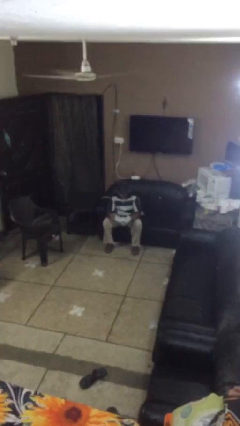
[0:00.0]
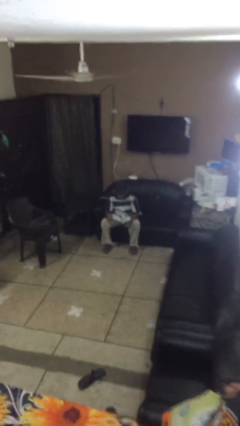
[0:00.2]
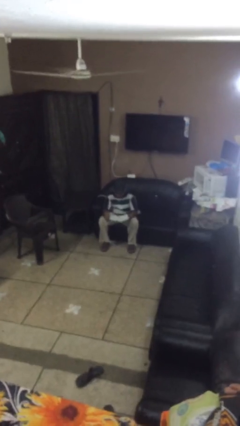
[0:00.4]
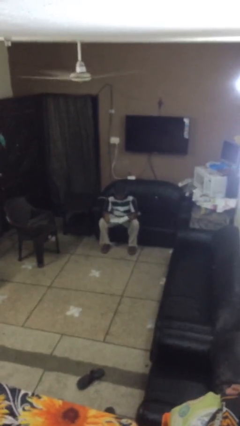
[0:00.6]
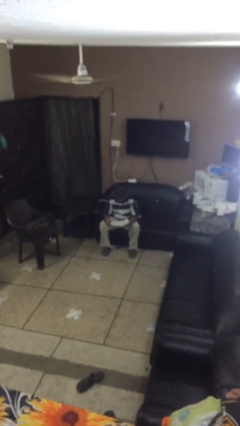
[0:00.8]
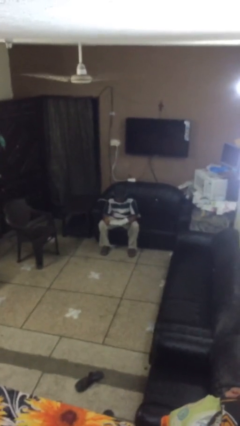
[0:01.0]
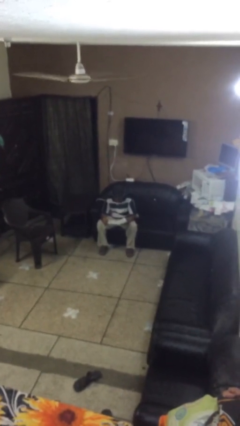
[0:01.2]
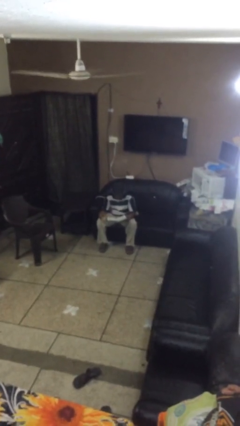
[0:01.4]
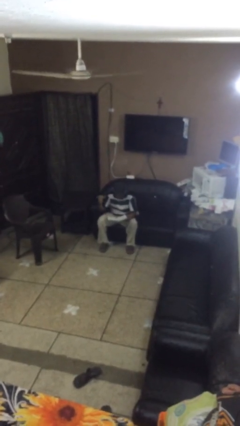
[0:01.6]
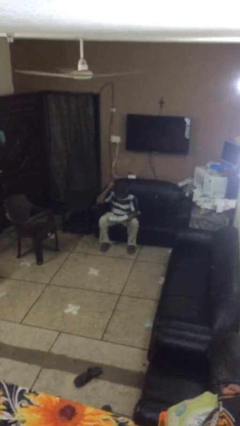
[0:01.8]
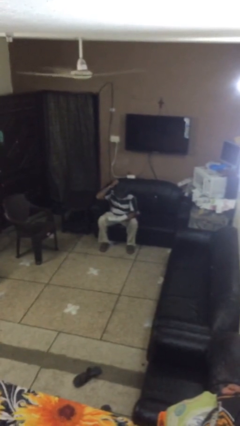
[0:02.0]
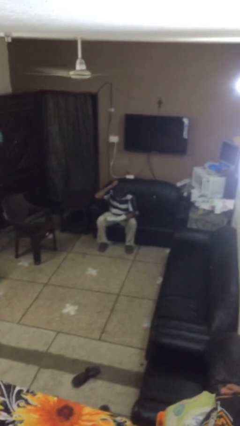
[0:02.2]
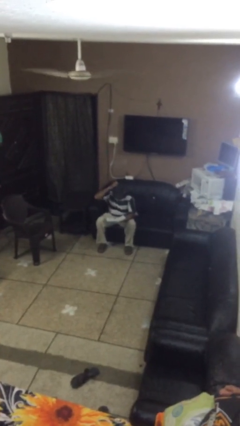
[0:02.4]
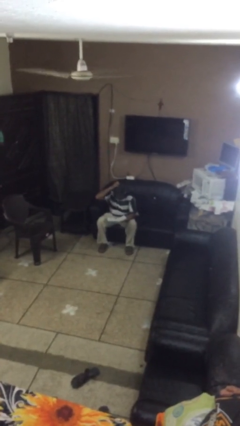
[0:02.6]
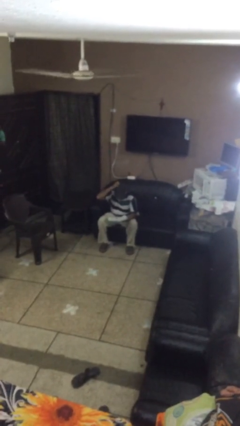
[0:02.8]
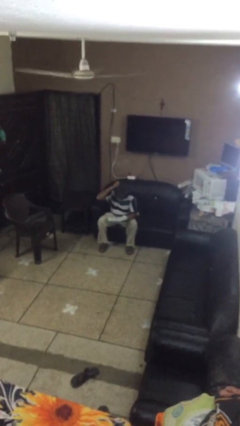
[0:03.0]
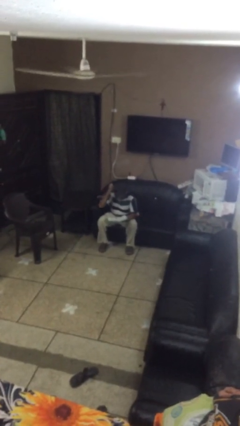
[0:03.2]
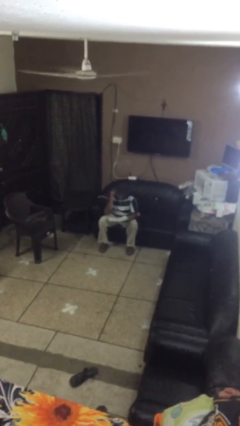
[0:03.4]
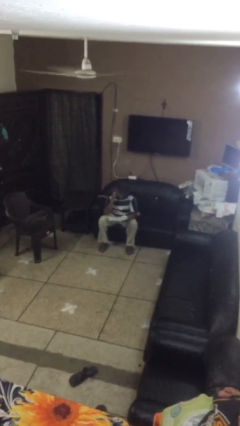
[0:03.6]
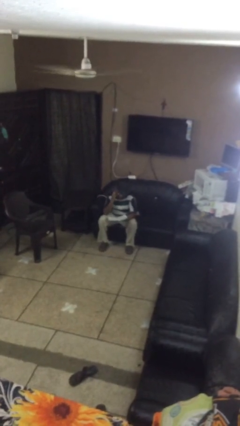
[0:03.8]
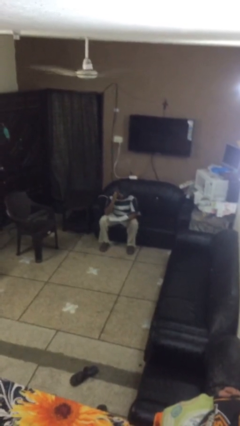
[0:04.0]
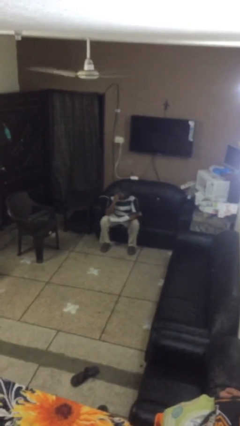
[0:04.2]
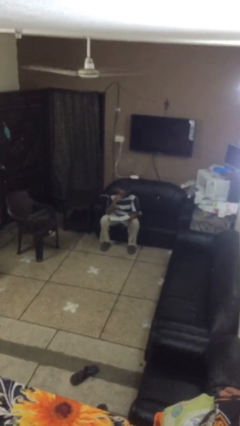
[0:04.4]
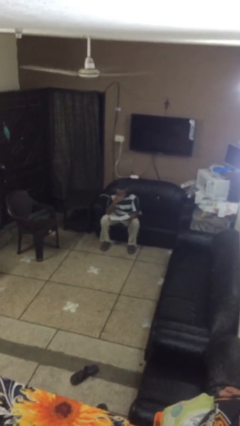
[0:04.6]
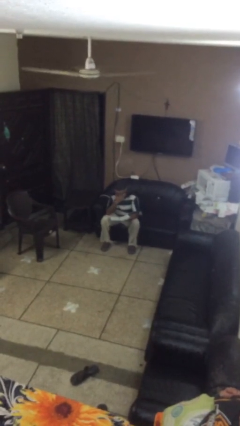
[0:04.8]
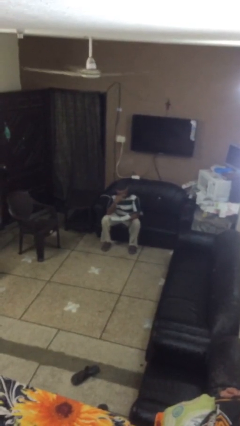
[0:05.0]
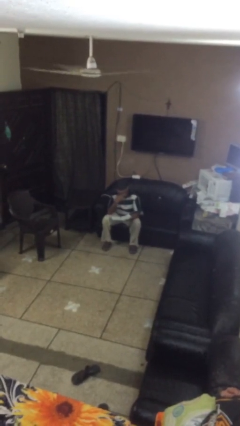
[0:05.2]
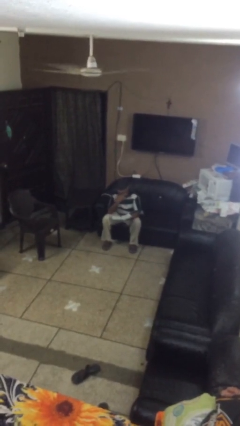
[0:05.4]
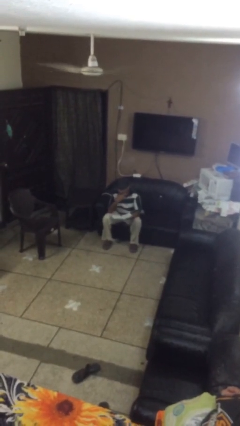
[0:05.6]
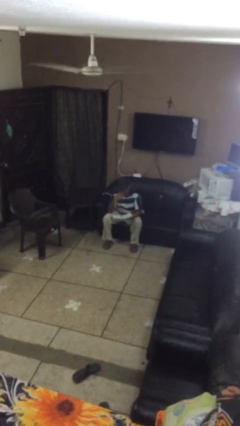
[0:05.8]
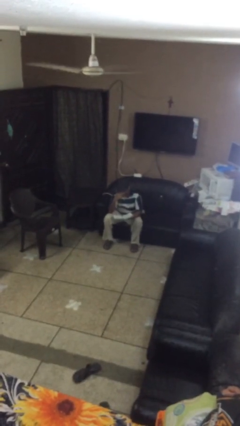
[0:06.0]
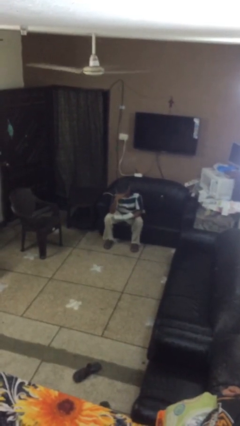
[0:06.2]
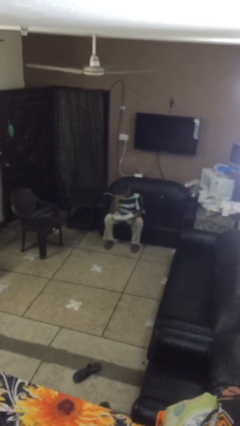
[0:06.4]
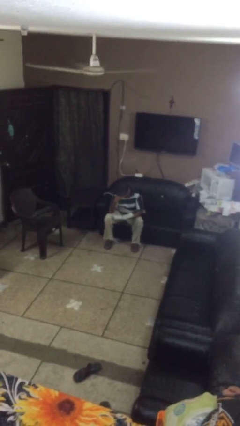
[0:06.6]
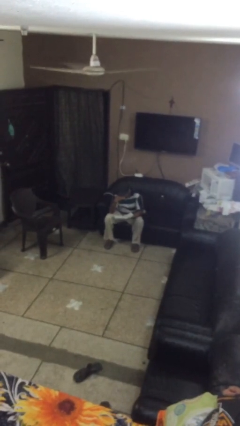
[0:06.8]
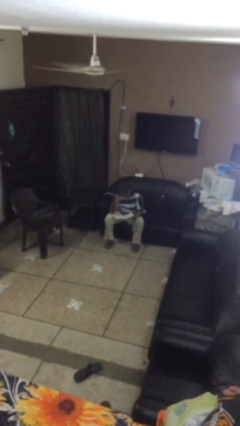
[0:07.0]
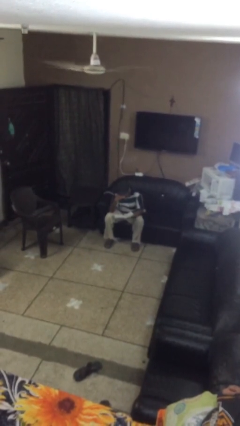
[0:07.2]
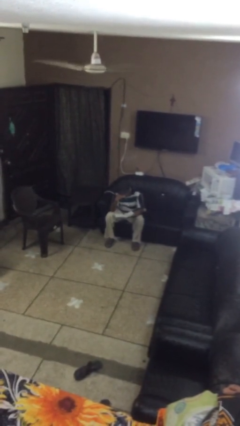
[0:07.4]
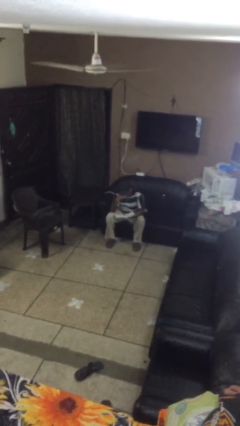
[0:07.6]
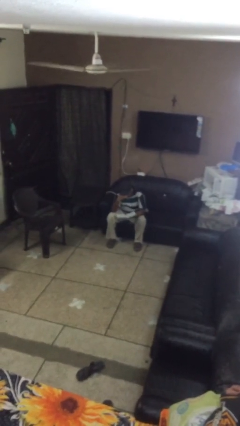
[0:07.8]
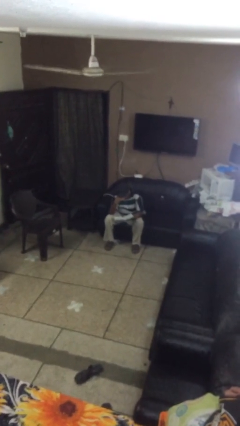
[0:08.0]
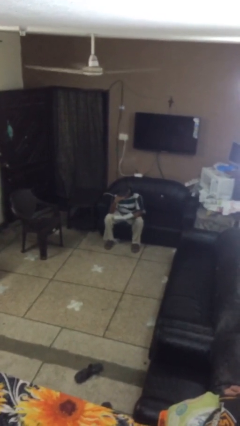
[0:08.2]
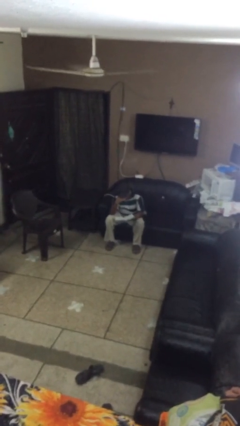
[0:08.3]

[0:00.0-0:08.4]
person reads document

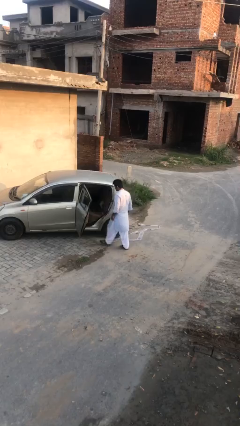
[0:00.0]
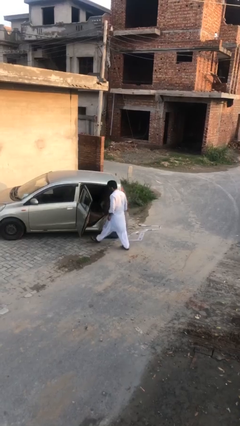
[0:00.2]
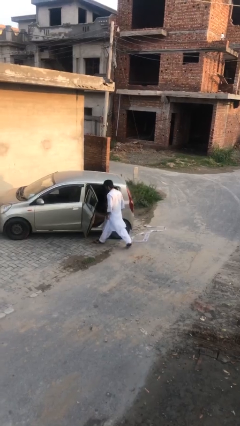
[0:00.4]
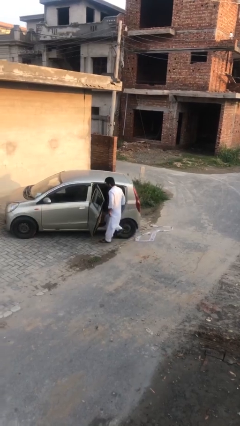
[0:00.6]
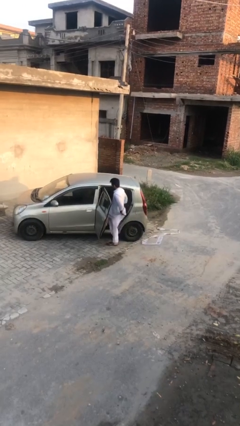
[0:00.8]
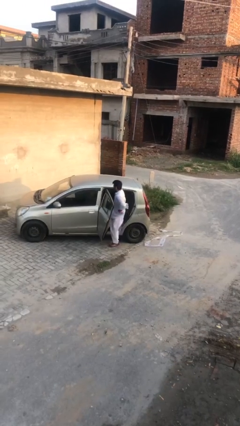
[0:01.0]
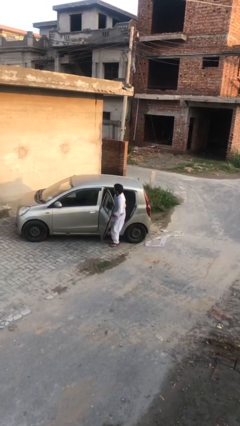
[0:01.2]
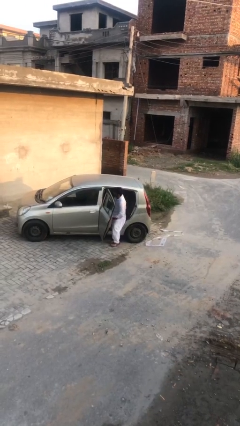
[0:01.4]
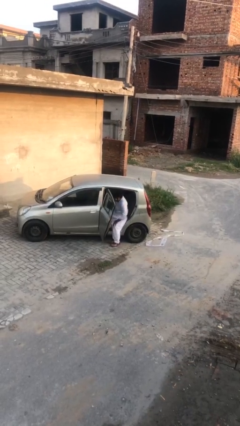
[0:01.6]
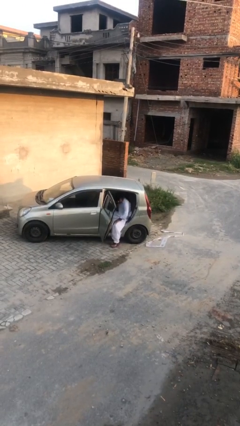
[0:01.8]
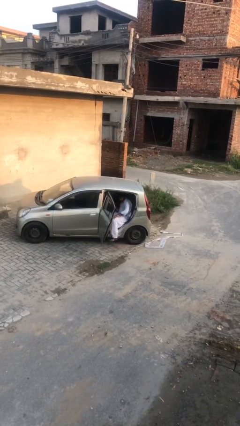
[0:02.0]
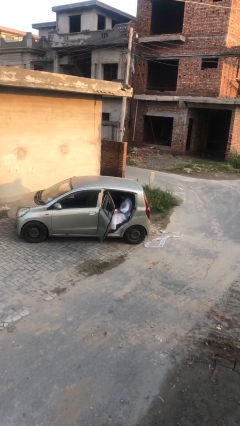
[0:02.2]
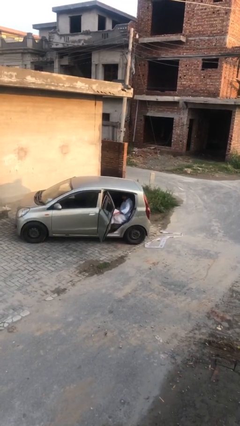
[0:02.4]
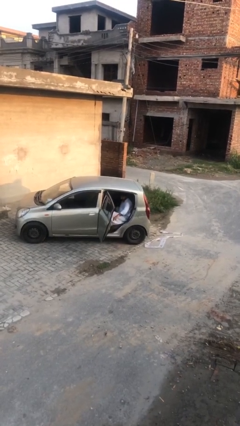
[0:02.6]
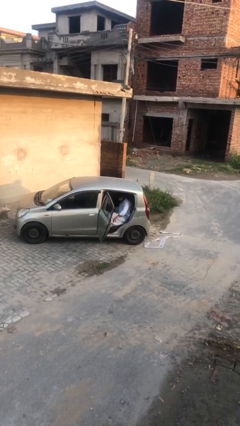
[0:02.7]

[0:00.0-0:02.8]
person enters car

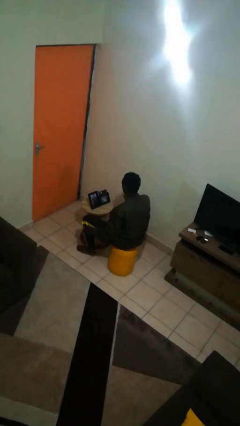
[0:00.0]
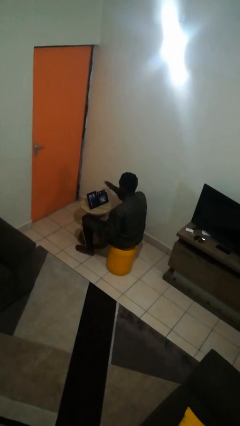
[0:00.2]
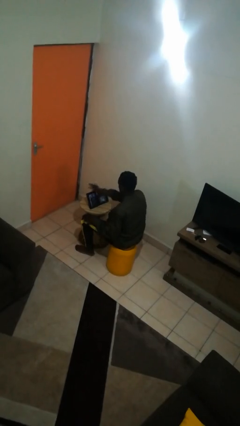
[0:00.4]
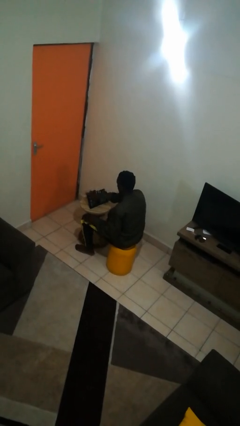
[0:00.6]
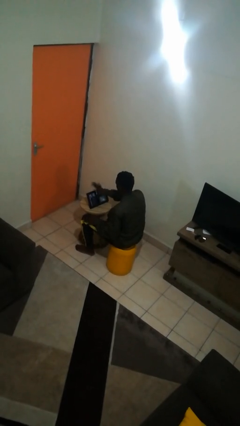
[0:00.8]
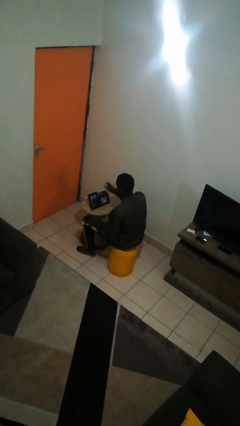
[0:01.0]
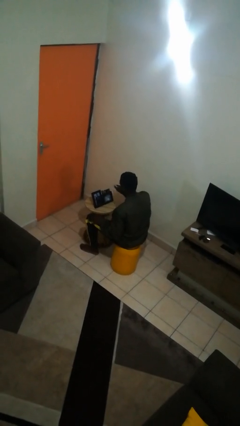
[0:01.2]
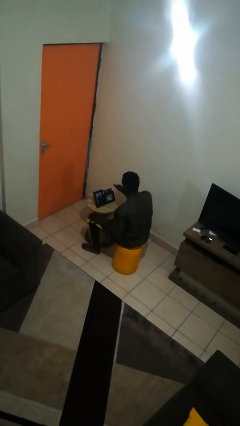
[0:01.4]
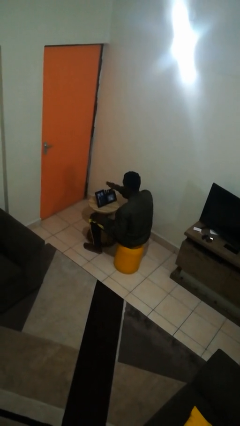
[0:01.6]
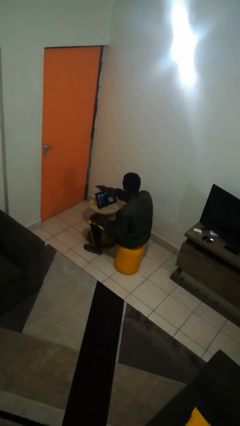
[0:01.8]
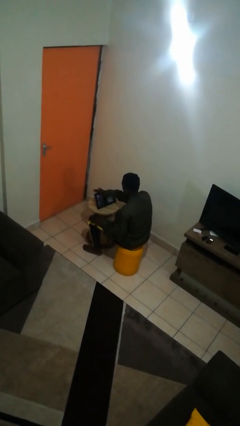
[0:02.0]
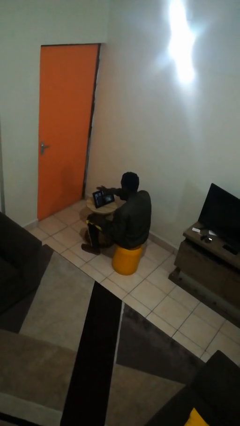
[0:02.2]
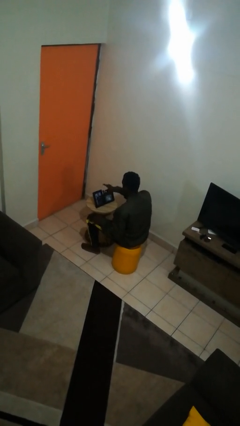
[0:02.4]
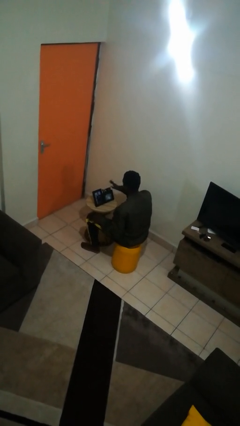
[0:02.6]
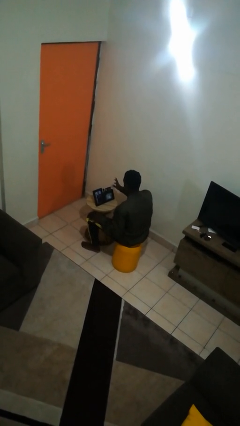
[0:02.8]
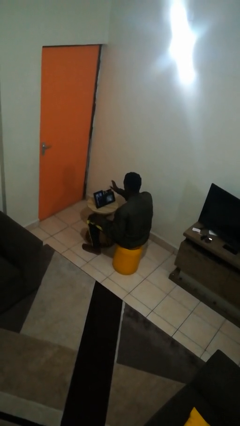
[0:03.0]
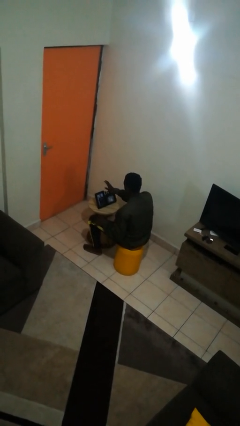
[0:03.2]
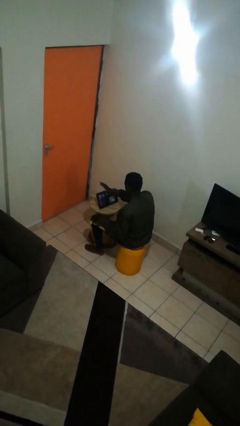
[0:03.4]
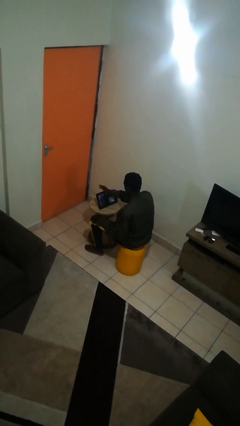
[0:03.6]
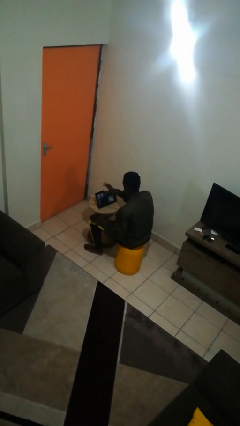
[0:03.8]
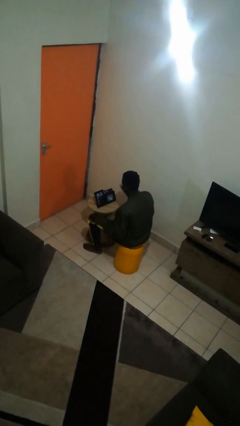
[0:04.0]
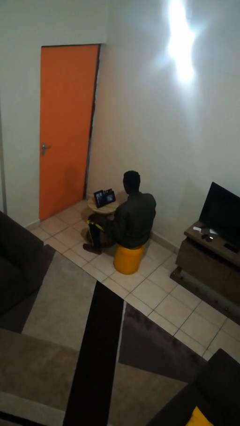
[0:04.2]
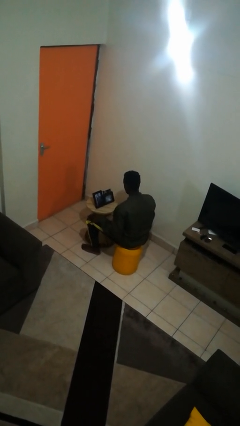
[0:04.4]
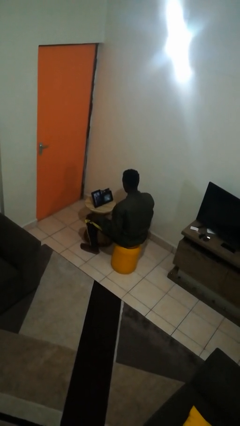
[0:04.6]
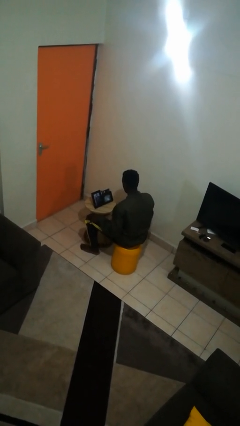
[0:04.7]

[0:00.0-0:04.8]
person waves hand over object

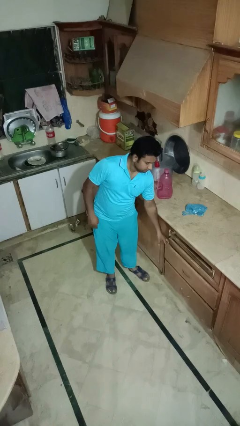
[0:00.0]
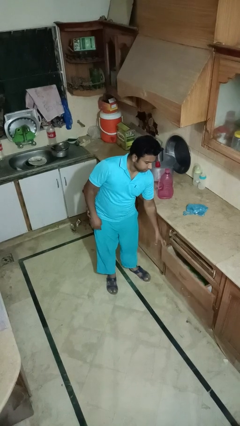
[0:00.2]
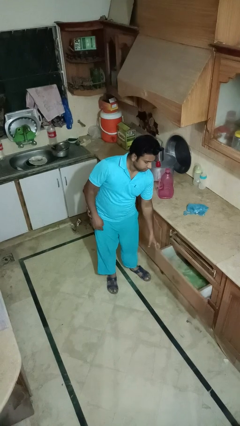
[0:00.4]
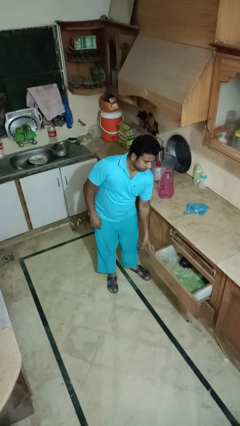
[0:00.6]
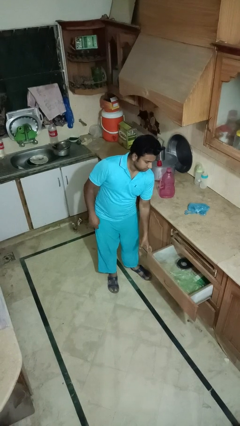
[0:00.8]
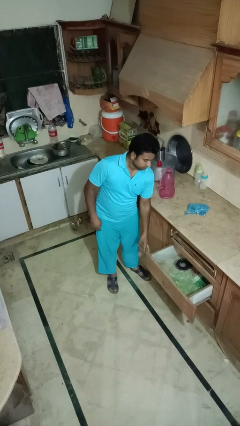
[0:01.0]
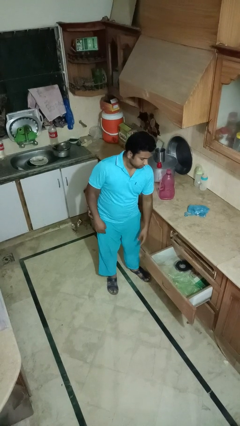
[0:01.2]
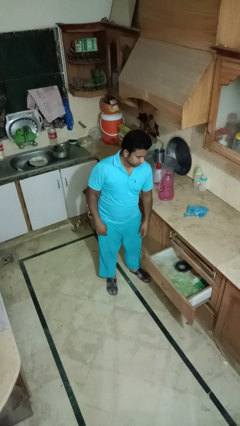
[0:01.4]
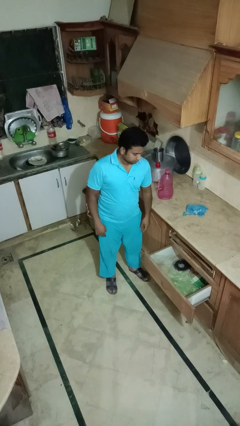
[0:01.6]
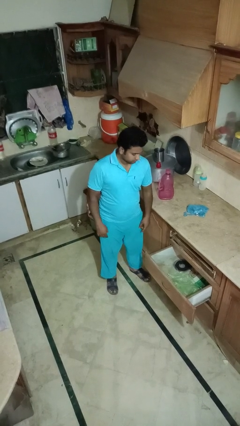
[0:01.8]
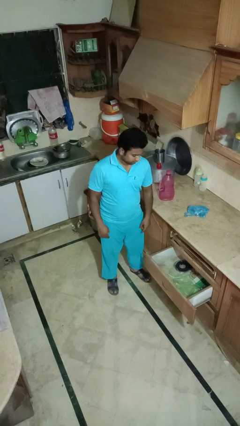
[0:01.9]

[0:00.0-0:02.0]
person opens kitchen drawer
